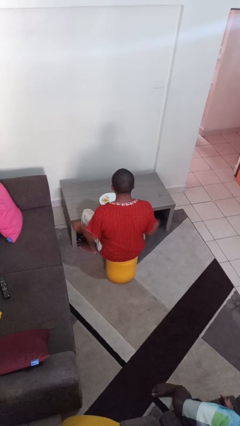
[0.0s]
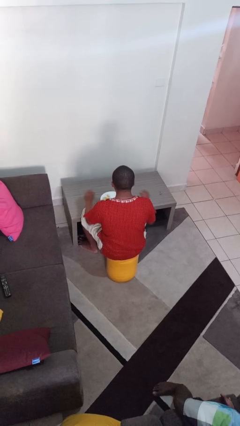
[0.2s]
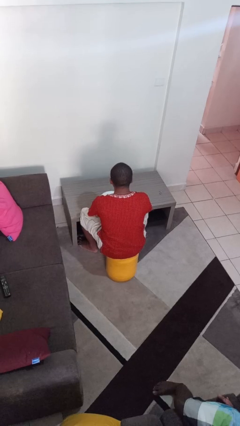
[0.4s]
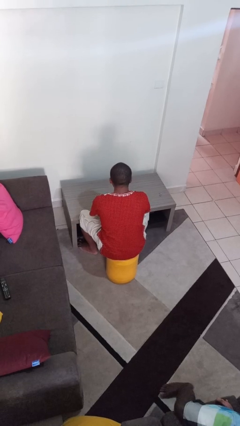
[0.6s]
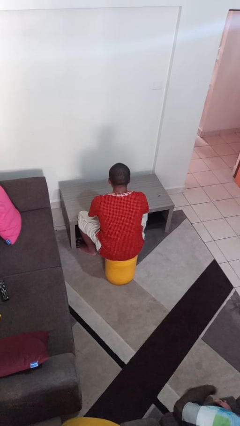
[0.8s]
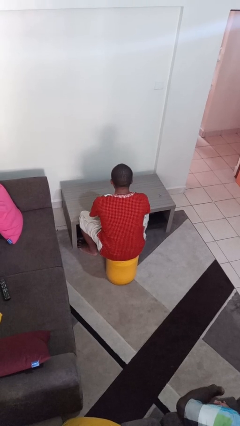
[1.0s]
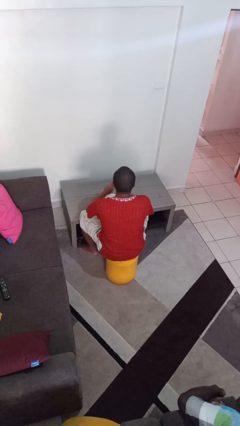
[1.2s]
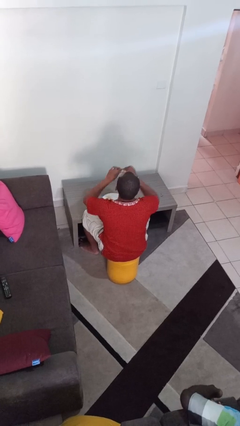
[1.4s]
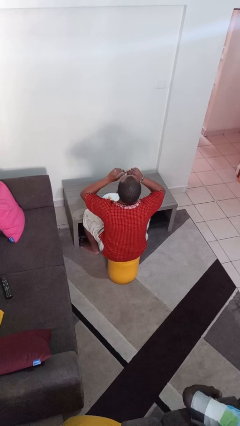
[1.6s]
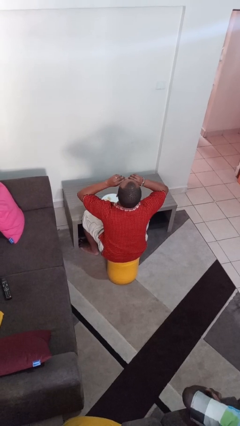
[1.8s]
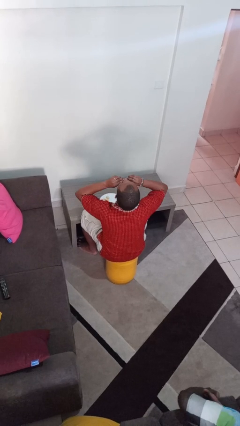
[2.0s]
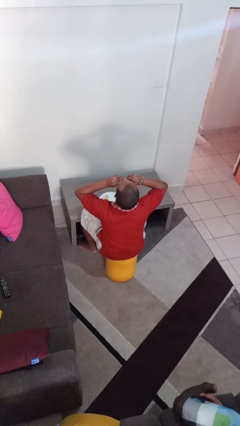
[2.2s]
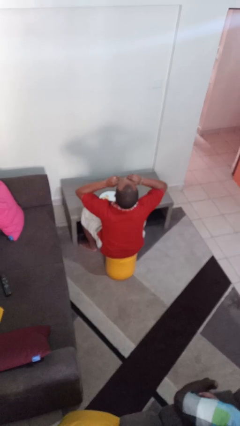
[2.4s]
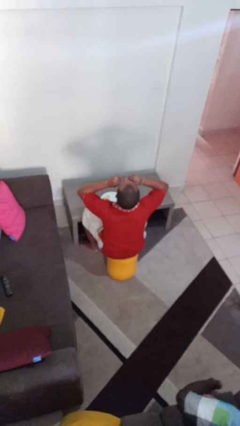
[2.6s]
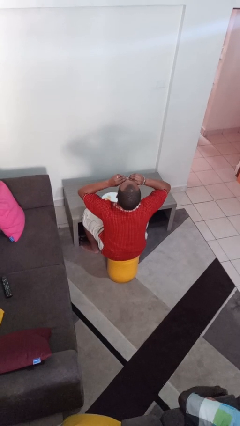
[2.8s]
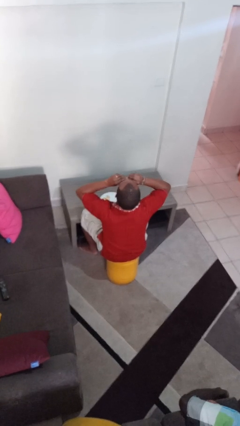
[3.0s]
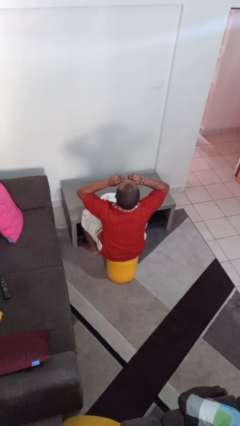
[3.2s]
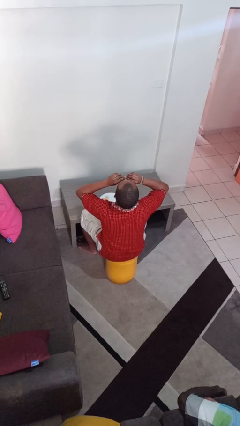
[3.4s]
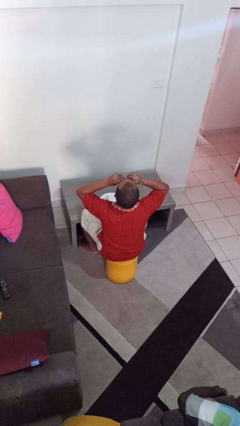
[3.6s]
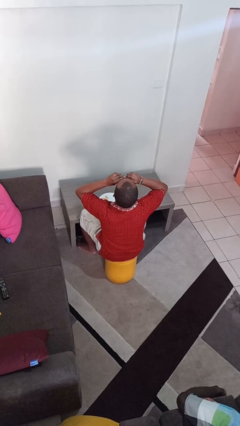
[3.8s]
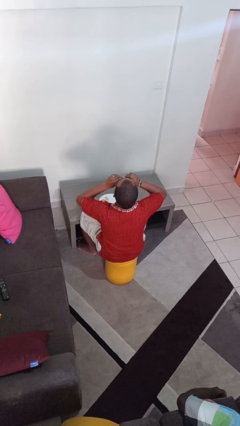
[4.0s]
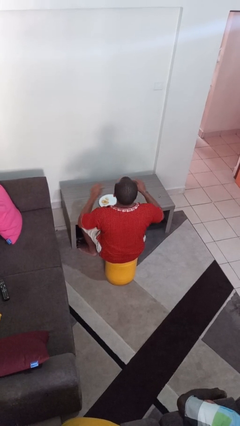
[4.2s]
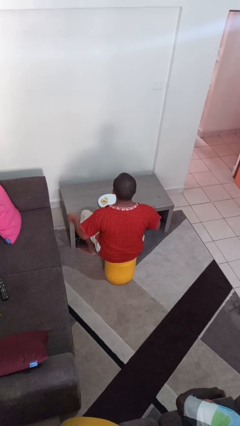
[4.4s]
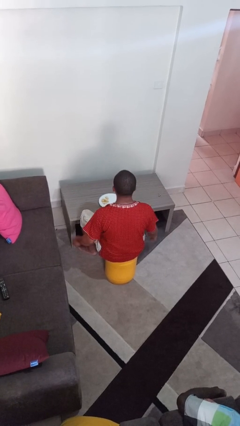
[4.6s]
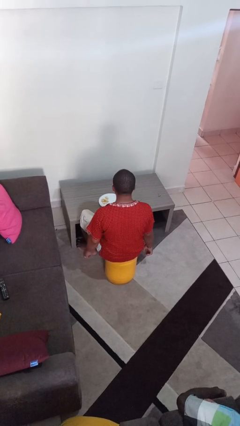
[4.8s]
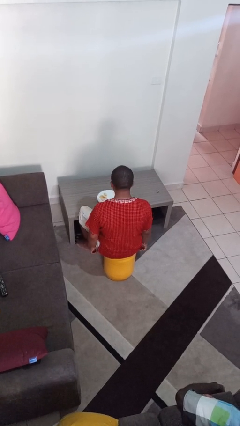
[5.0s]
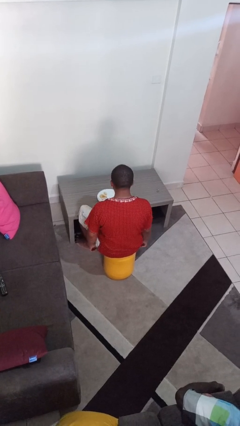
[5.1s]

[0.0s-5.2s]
person eats with hands

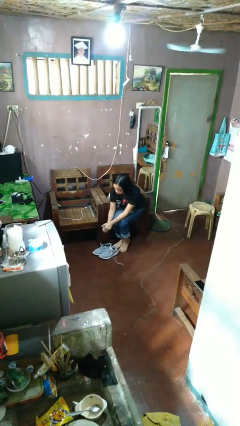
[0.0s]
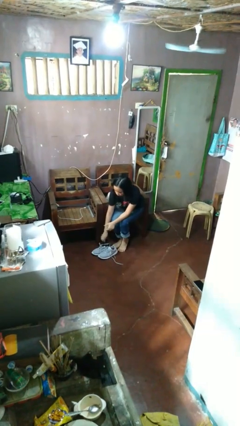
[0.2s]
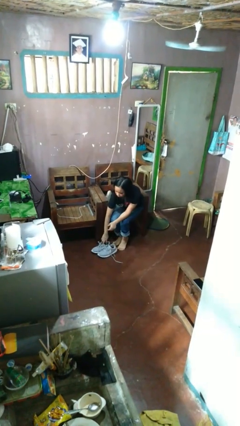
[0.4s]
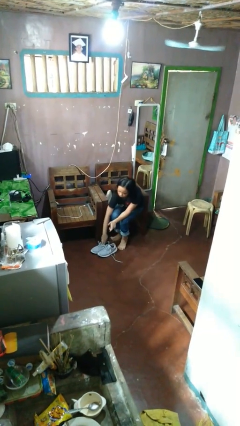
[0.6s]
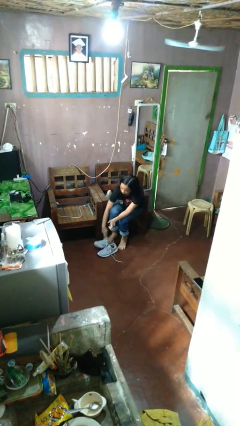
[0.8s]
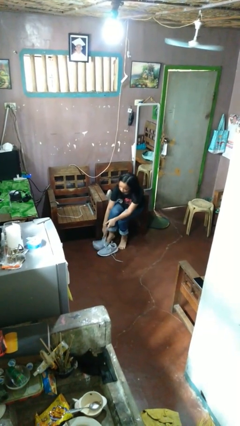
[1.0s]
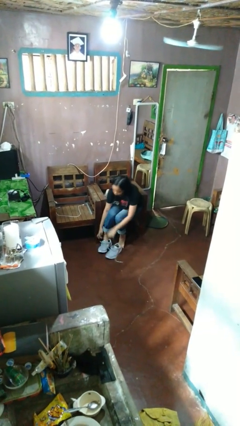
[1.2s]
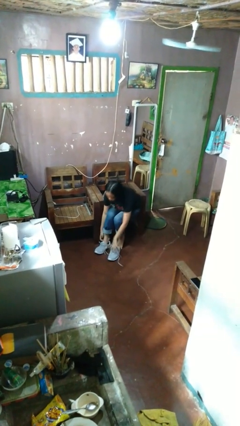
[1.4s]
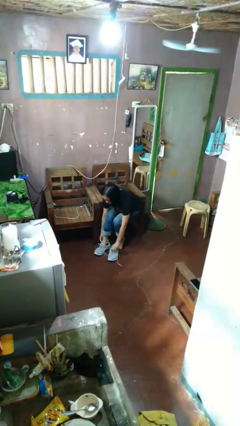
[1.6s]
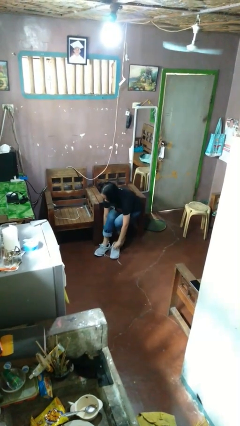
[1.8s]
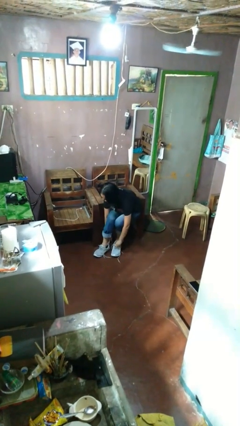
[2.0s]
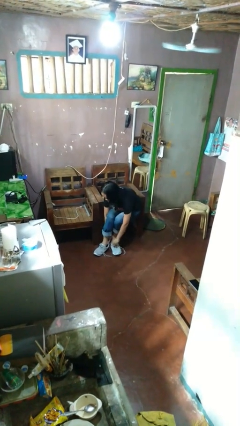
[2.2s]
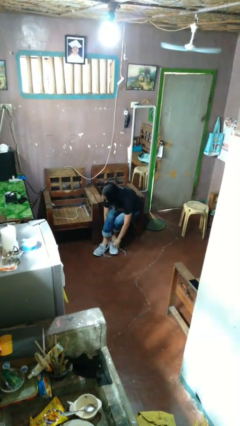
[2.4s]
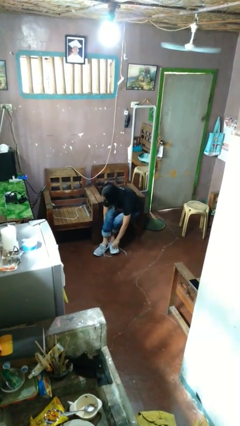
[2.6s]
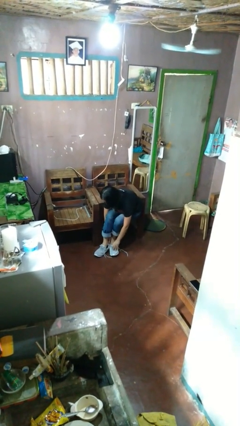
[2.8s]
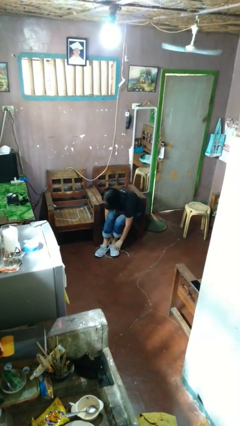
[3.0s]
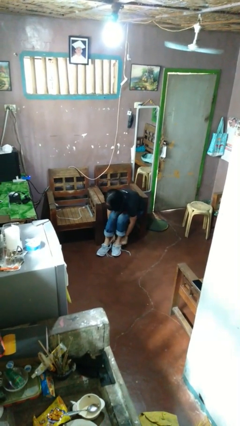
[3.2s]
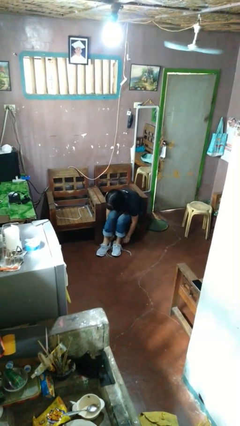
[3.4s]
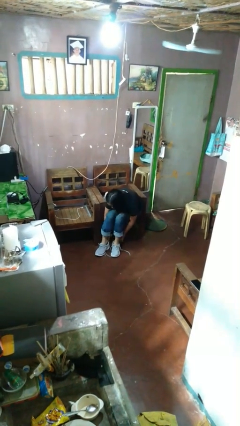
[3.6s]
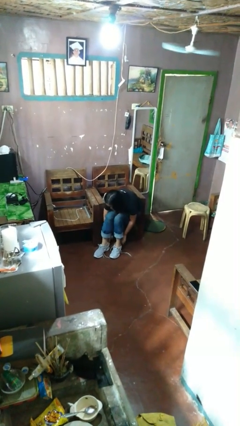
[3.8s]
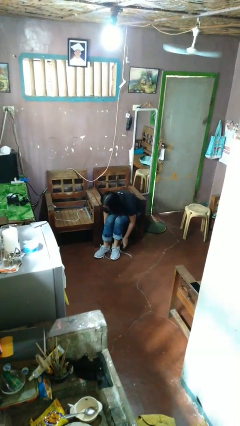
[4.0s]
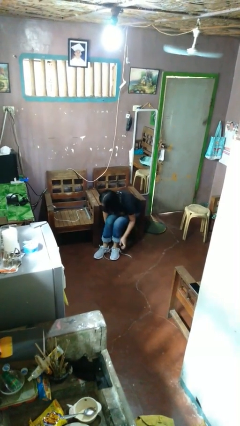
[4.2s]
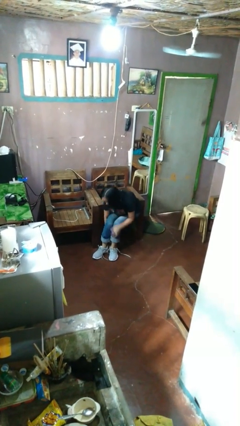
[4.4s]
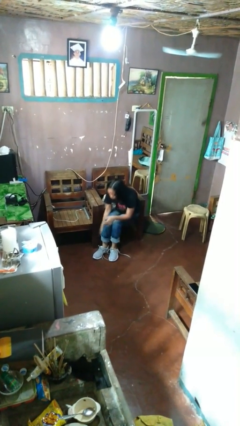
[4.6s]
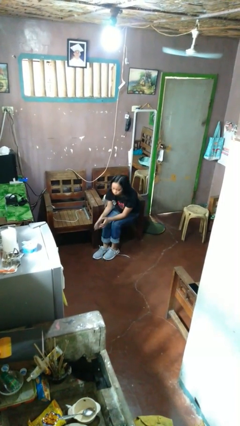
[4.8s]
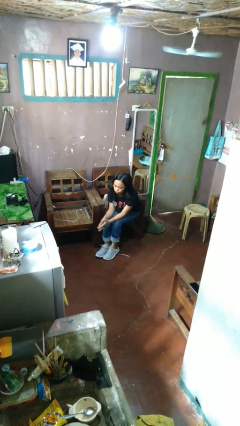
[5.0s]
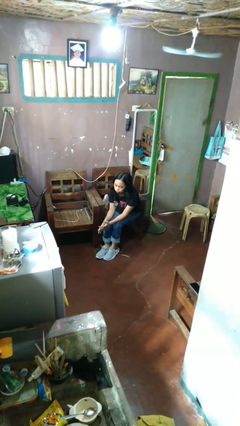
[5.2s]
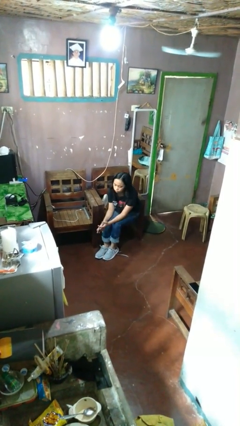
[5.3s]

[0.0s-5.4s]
person puts on shoes

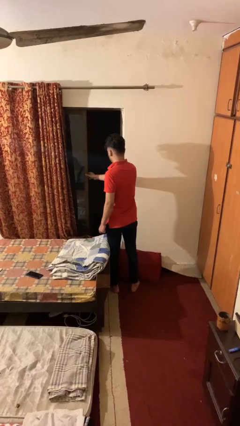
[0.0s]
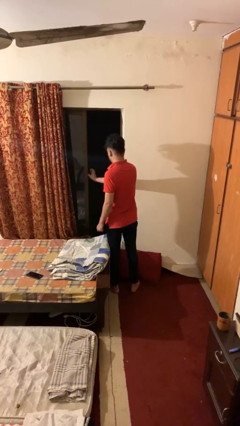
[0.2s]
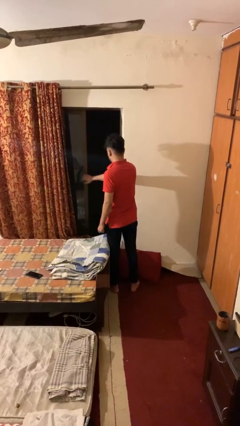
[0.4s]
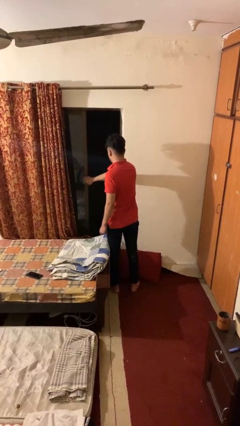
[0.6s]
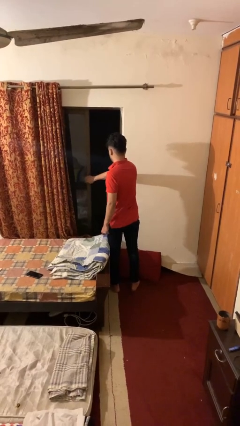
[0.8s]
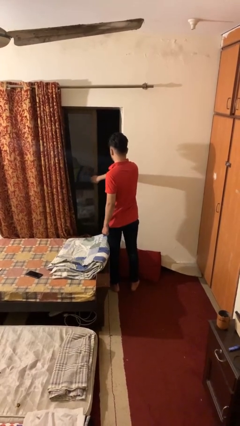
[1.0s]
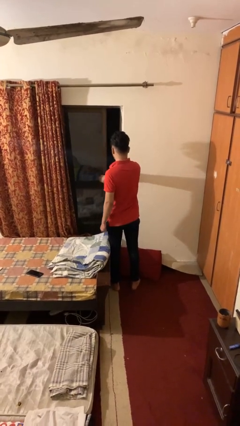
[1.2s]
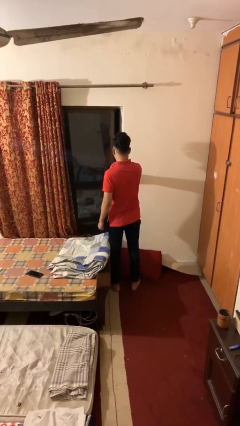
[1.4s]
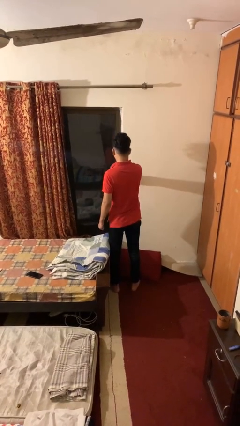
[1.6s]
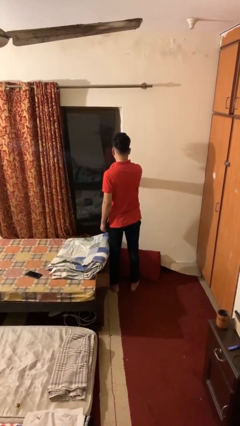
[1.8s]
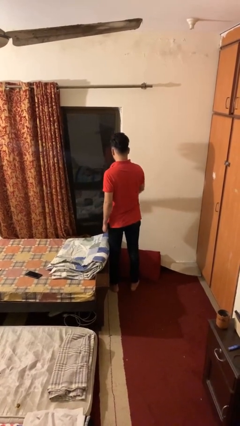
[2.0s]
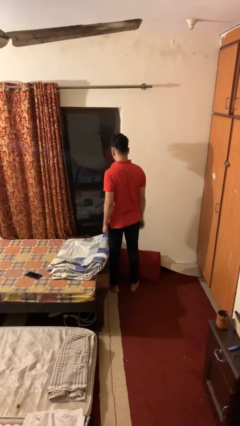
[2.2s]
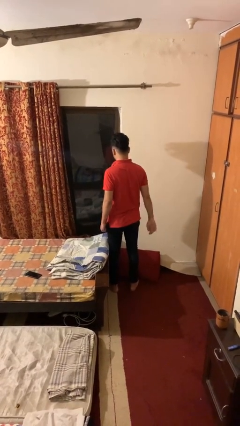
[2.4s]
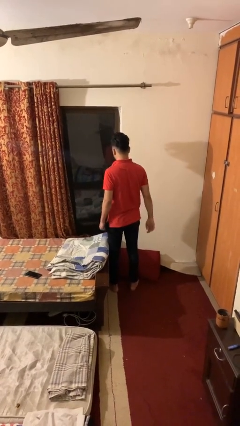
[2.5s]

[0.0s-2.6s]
person closes home window

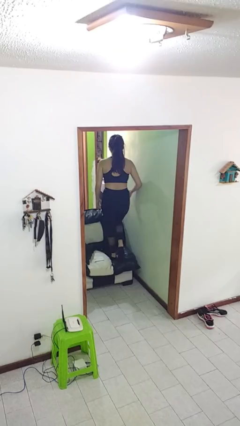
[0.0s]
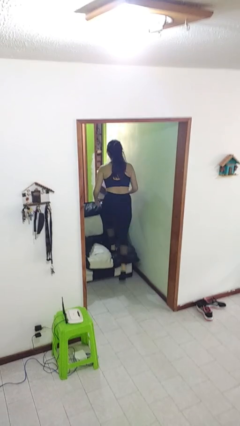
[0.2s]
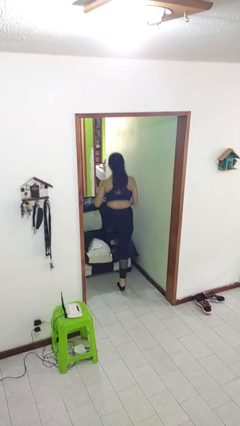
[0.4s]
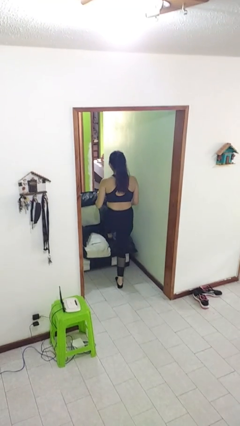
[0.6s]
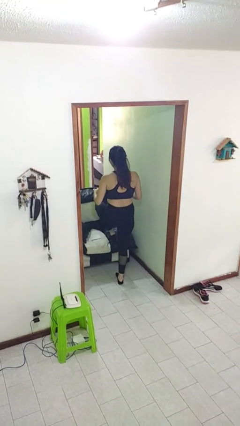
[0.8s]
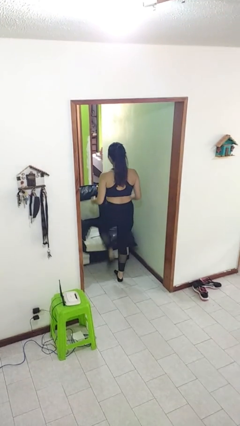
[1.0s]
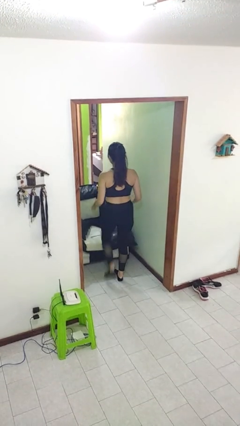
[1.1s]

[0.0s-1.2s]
person climbs off couch

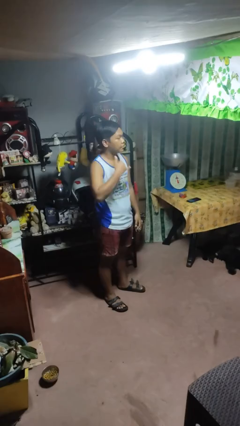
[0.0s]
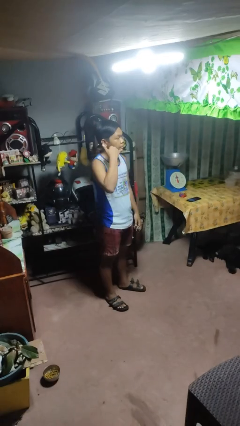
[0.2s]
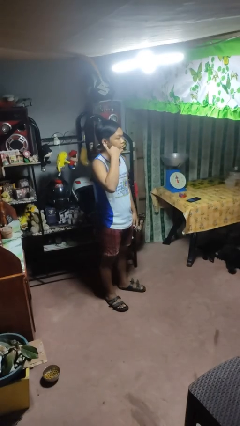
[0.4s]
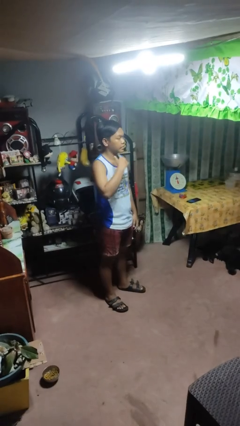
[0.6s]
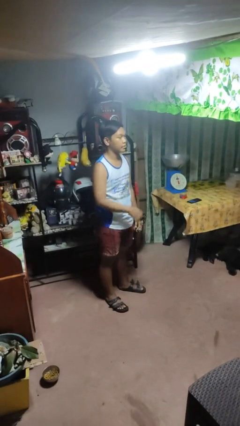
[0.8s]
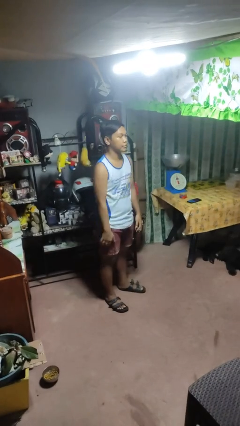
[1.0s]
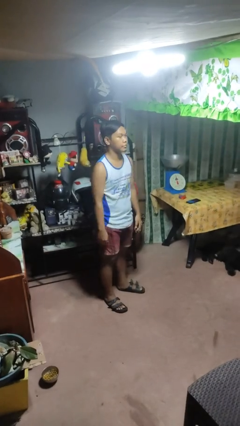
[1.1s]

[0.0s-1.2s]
person gestures call me

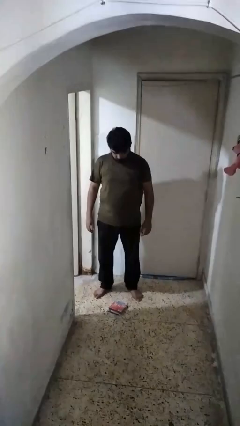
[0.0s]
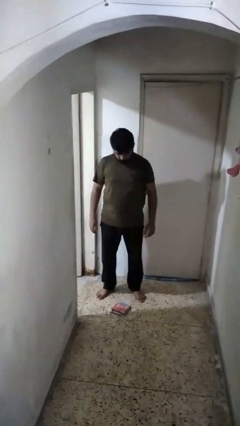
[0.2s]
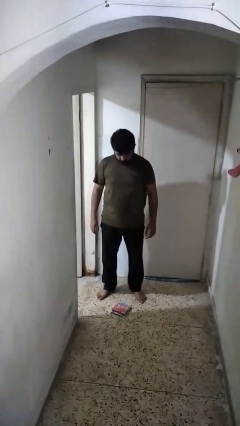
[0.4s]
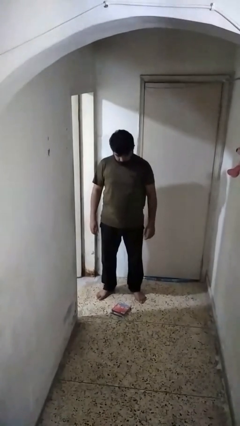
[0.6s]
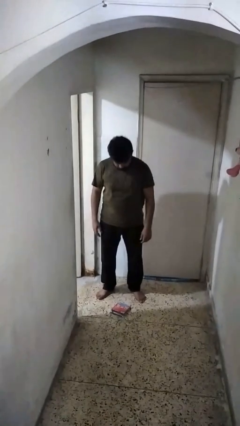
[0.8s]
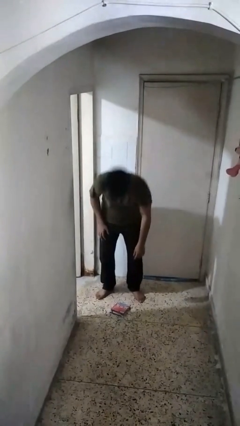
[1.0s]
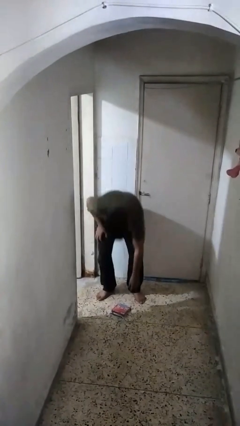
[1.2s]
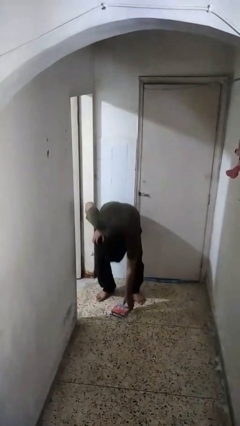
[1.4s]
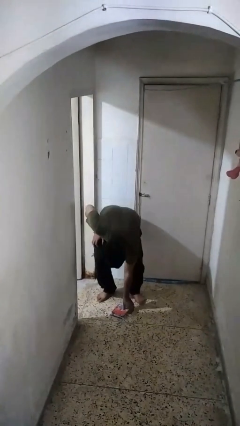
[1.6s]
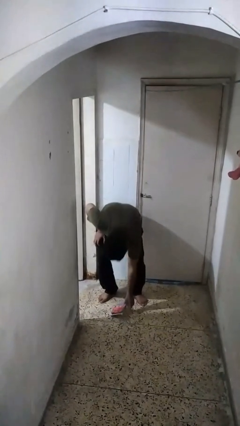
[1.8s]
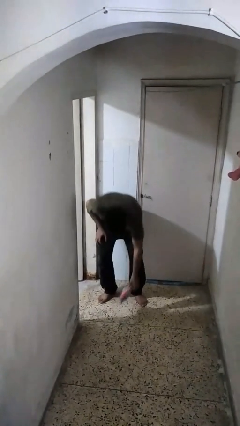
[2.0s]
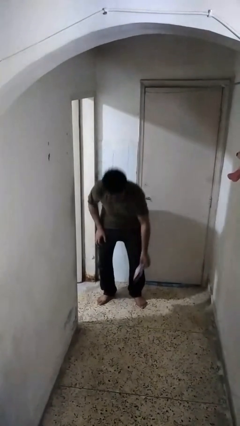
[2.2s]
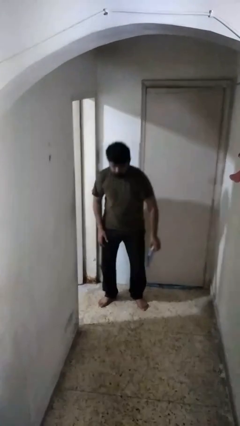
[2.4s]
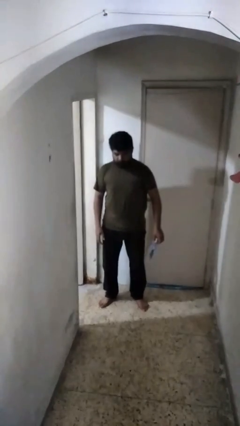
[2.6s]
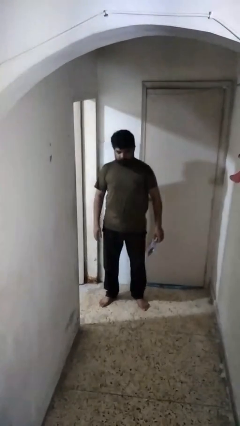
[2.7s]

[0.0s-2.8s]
person picks up object from floor
